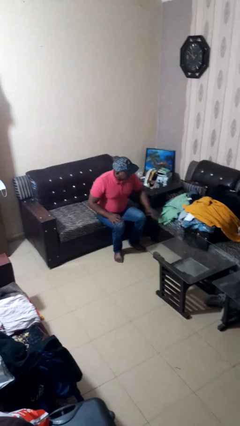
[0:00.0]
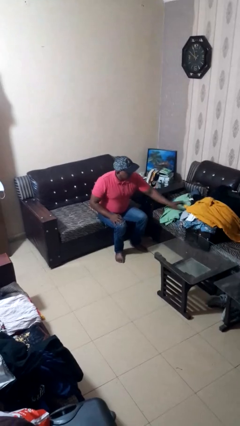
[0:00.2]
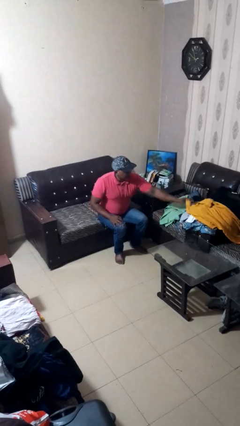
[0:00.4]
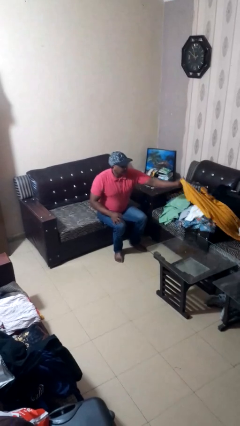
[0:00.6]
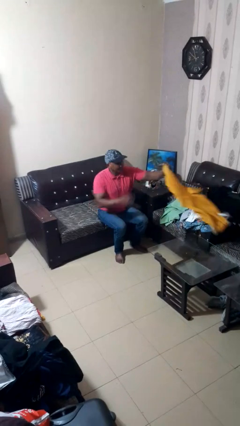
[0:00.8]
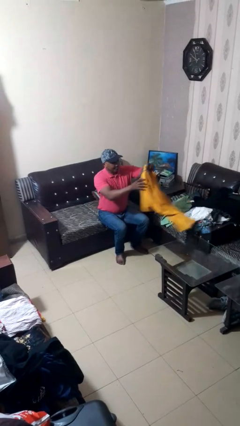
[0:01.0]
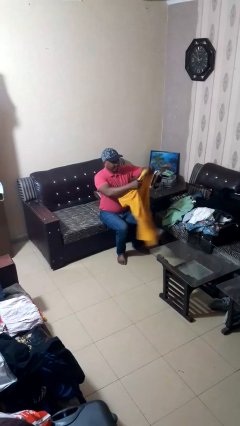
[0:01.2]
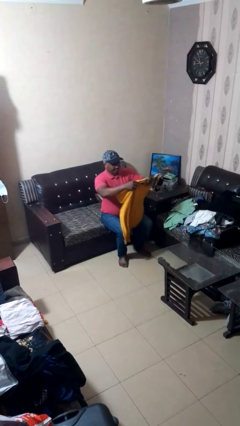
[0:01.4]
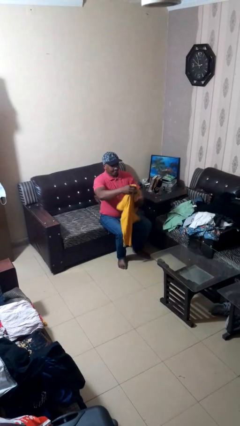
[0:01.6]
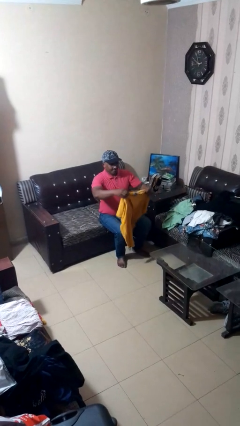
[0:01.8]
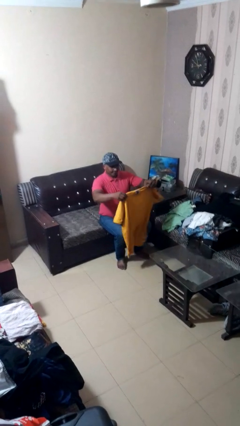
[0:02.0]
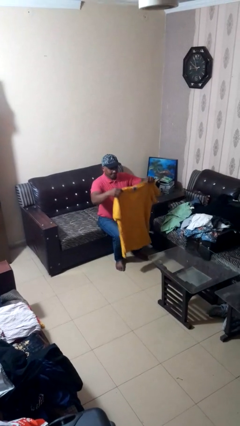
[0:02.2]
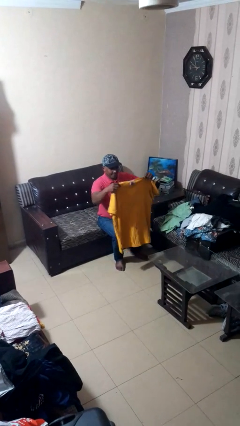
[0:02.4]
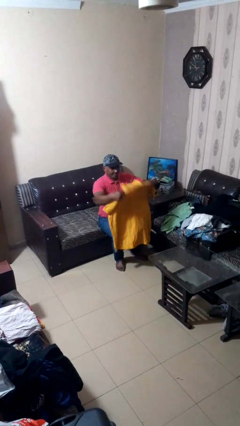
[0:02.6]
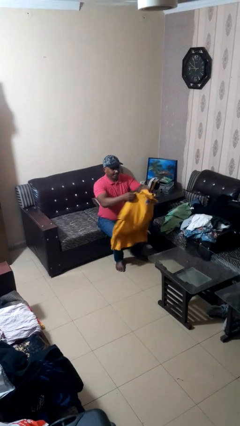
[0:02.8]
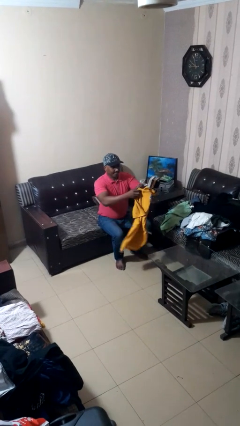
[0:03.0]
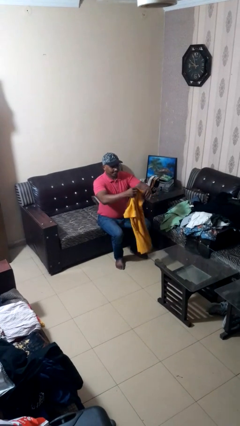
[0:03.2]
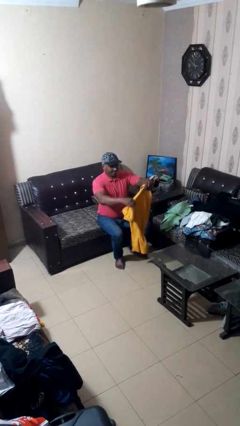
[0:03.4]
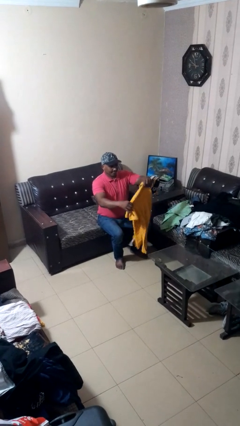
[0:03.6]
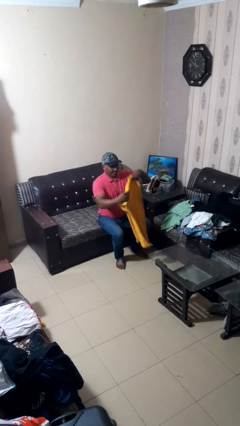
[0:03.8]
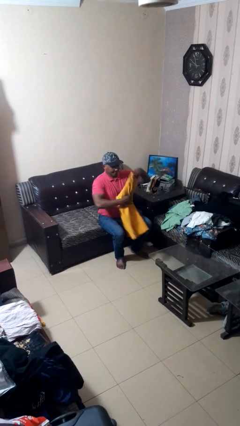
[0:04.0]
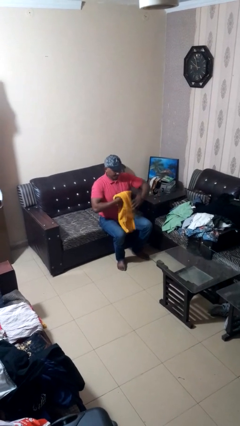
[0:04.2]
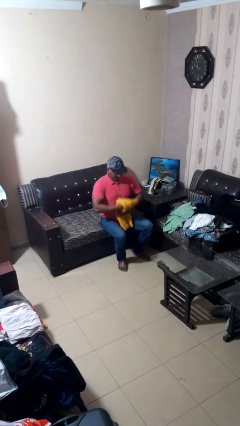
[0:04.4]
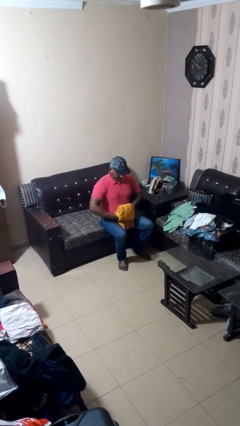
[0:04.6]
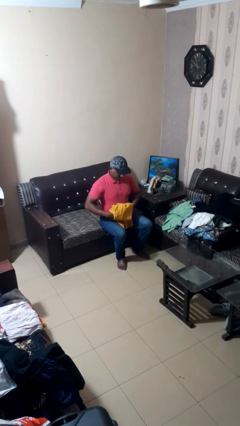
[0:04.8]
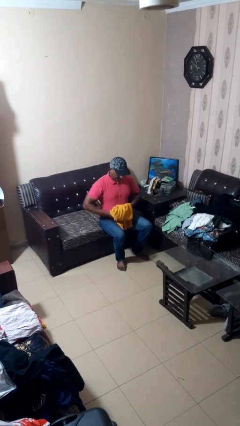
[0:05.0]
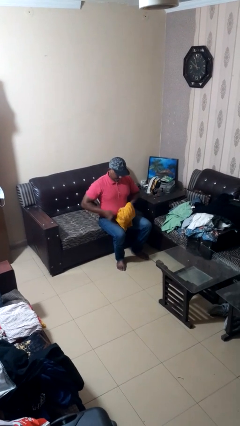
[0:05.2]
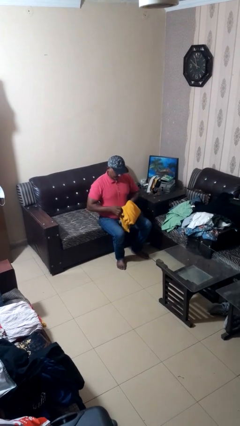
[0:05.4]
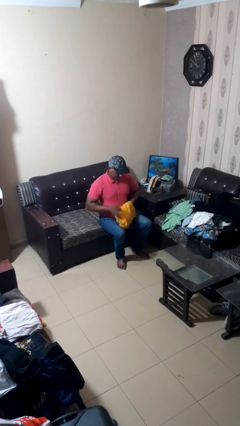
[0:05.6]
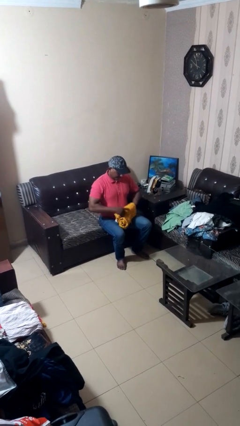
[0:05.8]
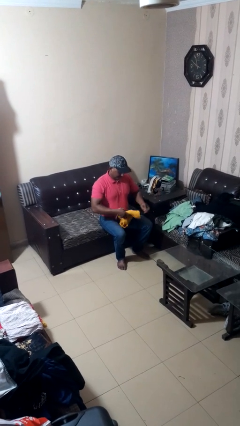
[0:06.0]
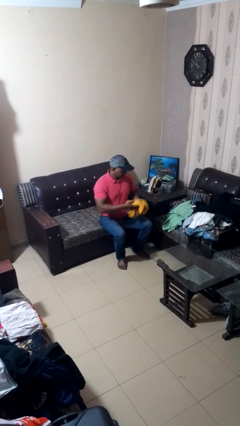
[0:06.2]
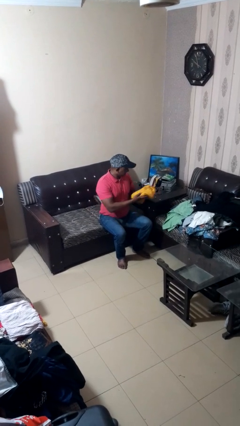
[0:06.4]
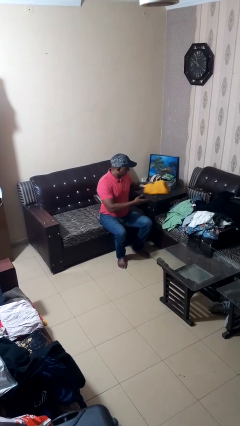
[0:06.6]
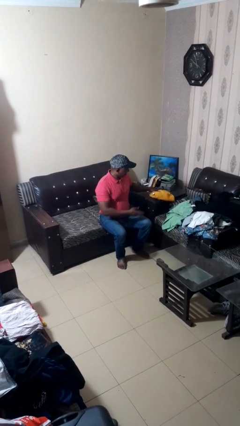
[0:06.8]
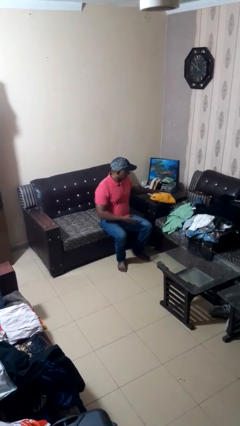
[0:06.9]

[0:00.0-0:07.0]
person folds shirt

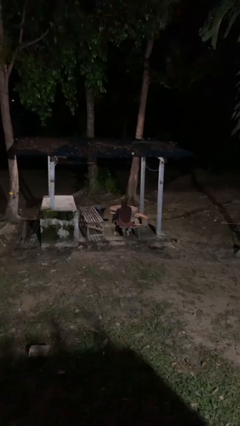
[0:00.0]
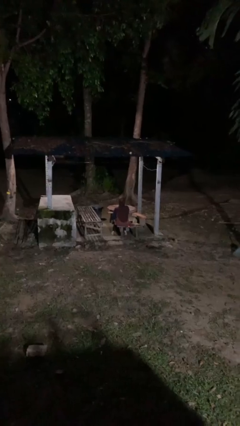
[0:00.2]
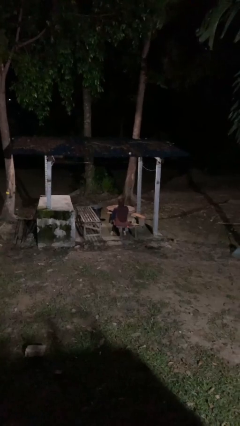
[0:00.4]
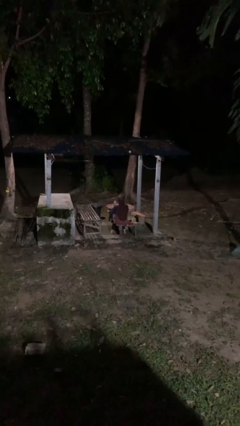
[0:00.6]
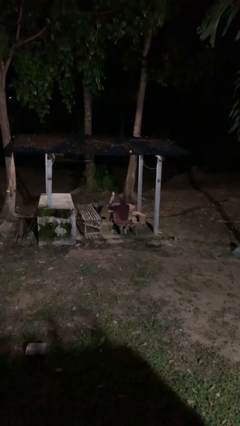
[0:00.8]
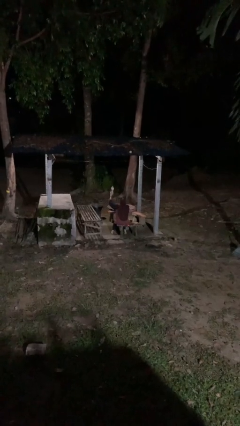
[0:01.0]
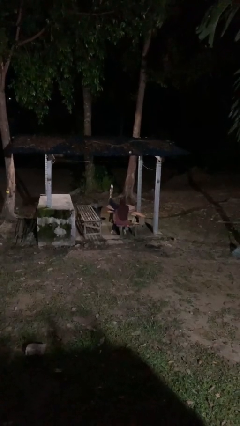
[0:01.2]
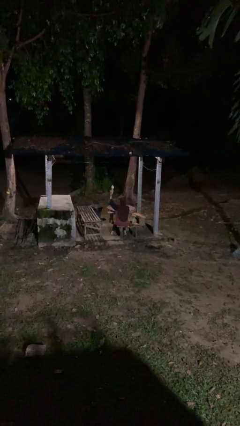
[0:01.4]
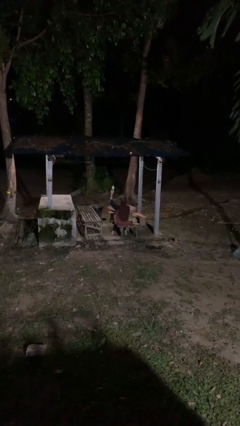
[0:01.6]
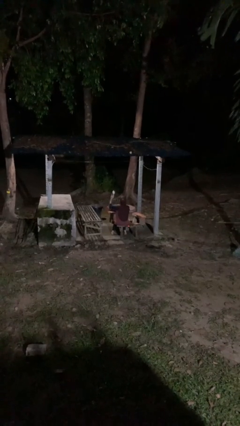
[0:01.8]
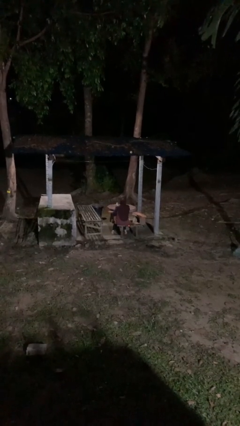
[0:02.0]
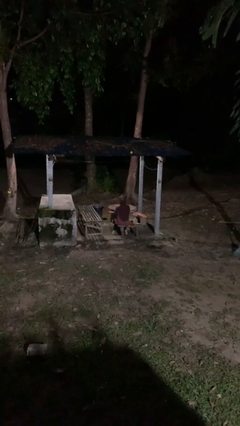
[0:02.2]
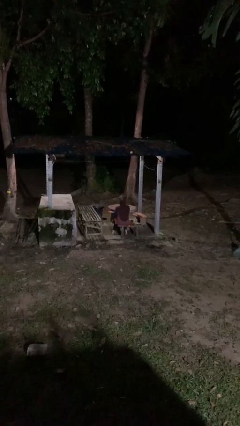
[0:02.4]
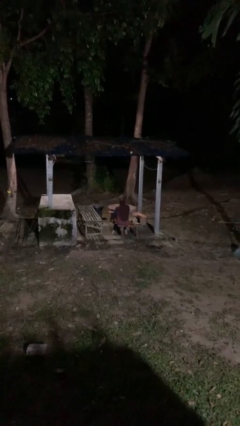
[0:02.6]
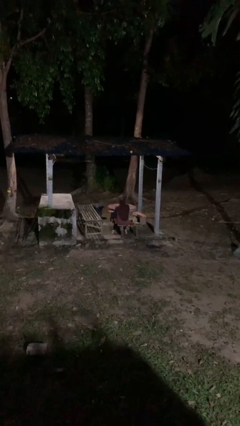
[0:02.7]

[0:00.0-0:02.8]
person holds object above head

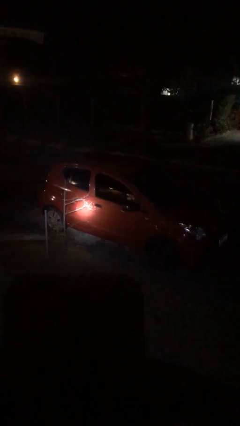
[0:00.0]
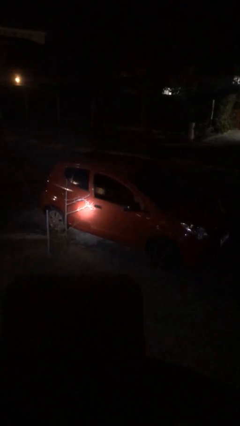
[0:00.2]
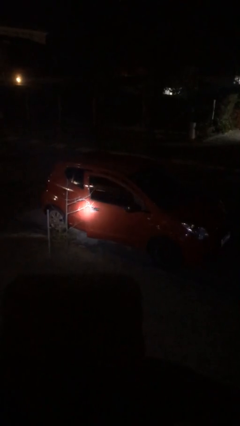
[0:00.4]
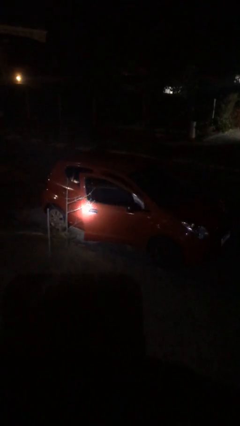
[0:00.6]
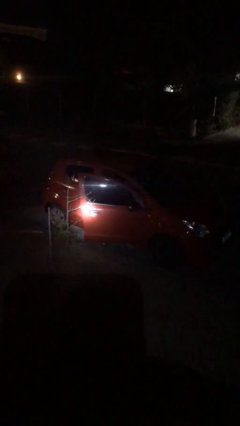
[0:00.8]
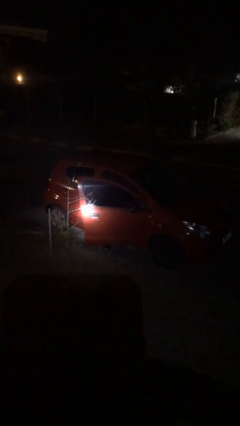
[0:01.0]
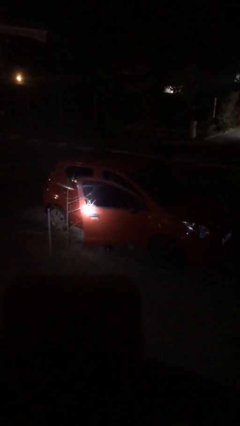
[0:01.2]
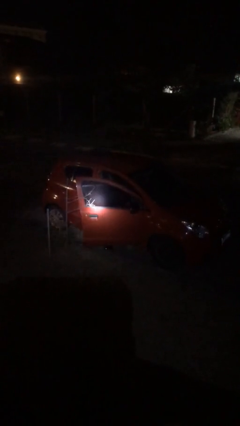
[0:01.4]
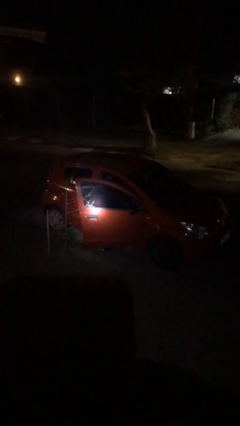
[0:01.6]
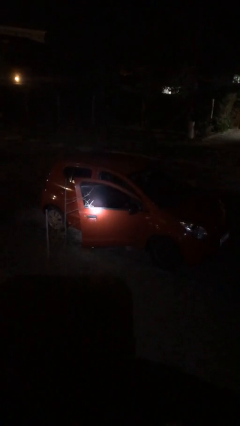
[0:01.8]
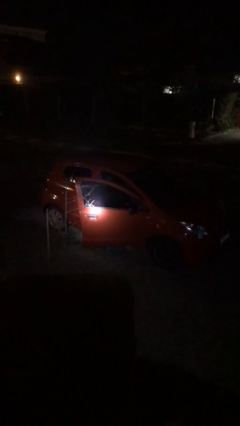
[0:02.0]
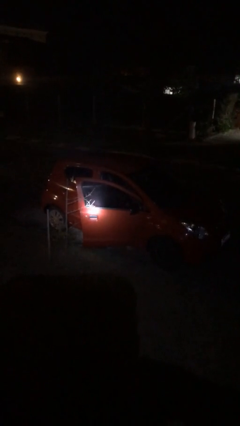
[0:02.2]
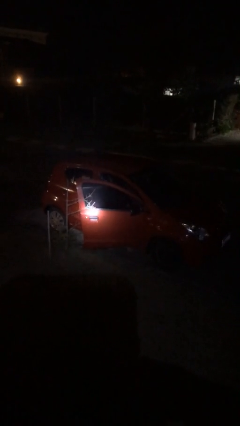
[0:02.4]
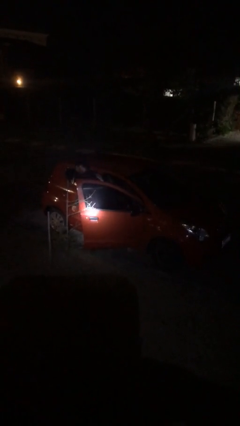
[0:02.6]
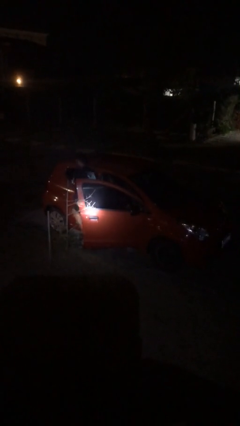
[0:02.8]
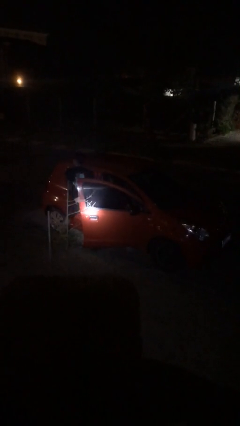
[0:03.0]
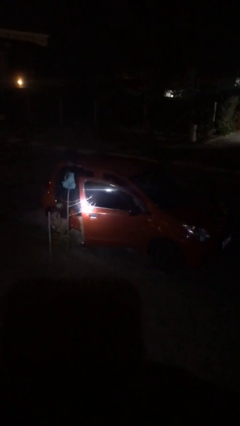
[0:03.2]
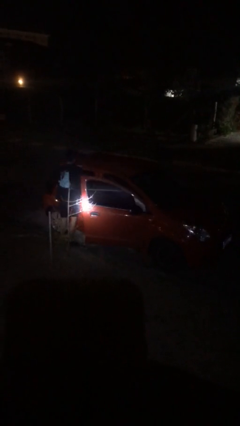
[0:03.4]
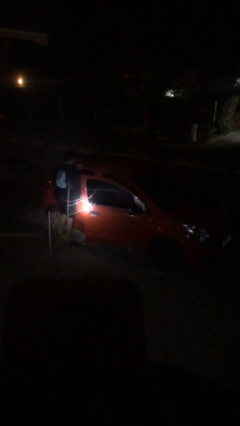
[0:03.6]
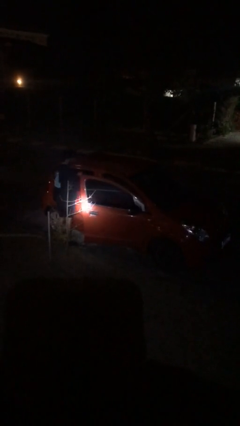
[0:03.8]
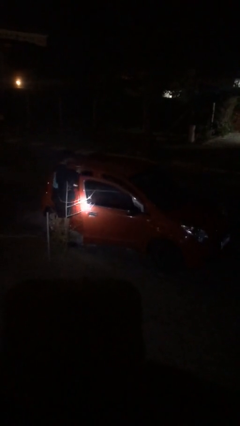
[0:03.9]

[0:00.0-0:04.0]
car drops off person

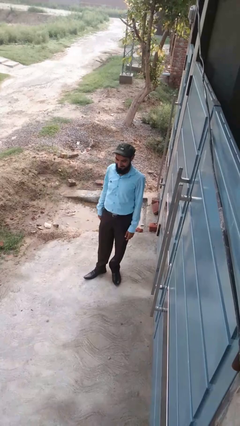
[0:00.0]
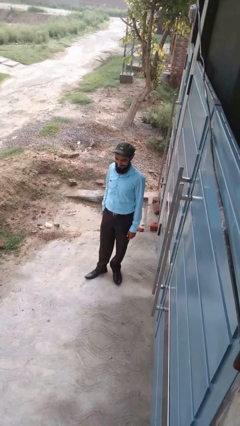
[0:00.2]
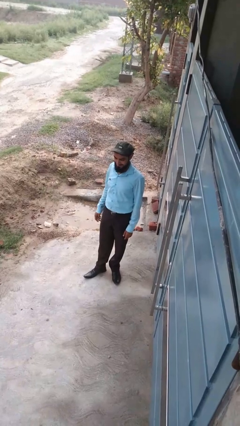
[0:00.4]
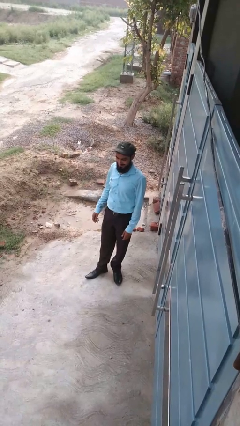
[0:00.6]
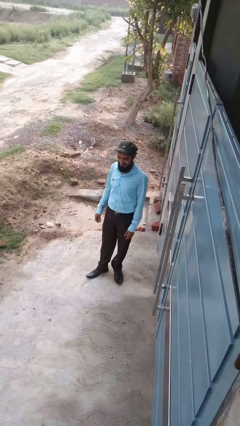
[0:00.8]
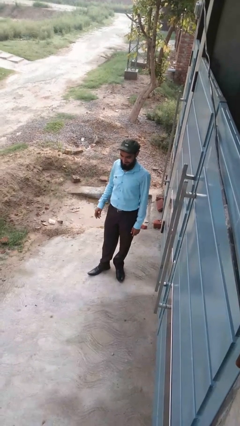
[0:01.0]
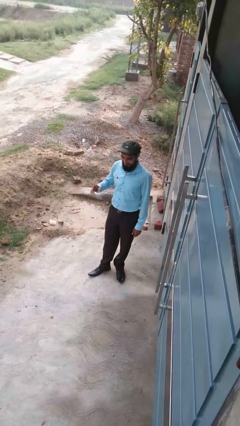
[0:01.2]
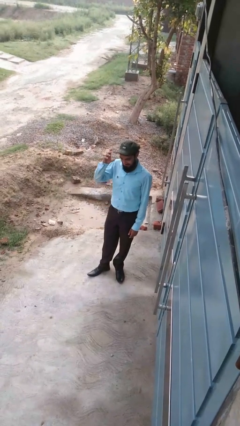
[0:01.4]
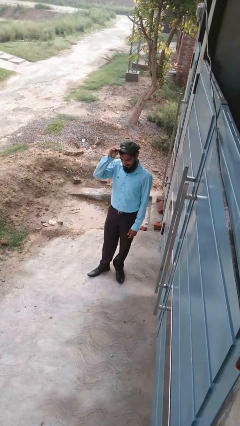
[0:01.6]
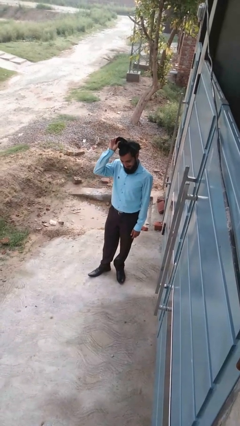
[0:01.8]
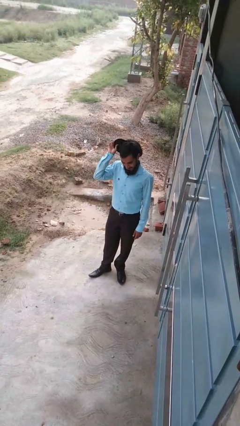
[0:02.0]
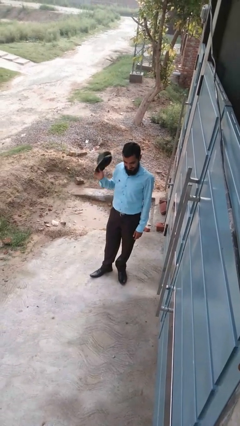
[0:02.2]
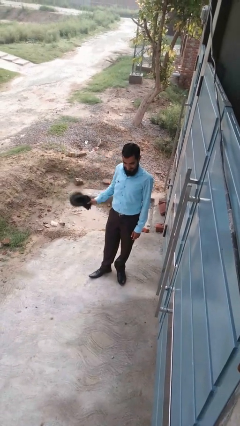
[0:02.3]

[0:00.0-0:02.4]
person takes off hat

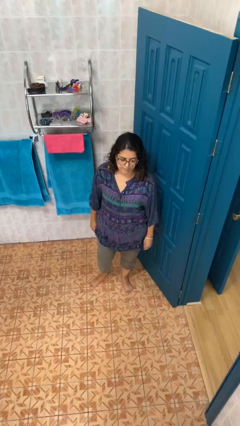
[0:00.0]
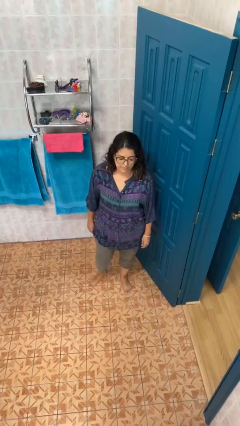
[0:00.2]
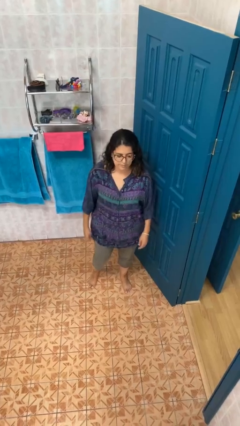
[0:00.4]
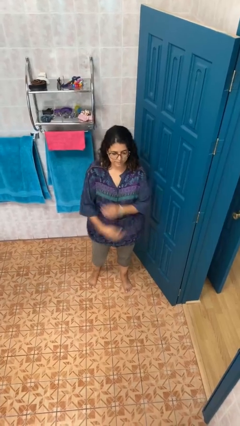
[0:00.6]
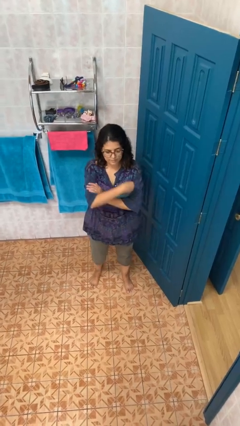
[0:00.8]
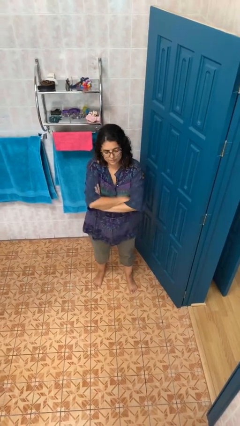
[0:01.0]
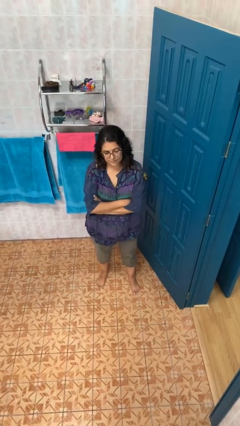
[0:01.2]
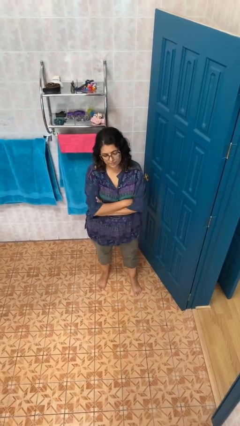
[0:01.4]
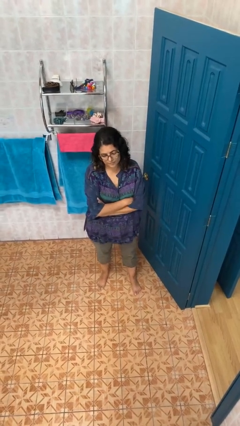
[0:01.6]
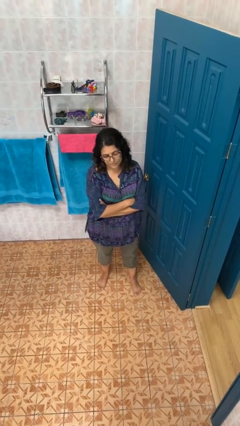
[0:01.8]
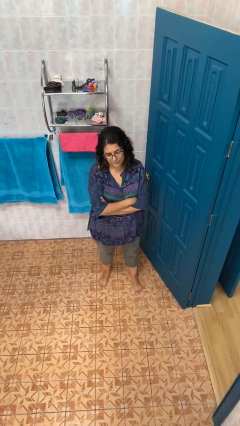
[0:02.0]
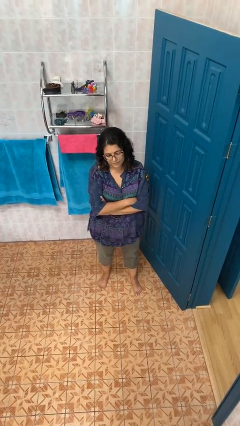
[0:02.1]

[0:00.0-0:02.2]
person crosses arms
